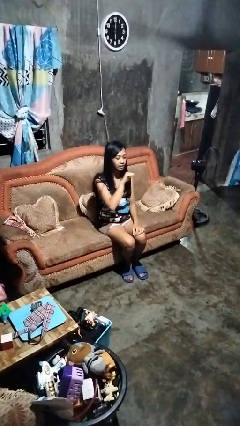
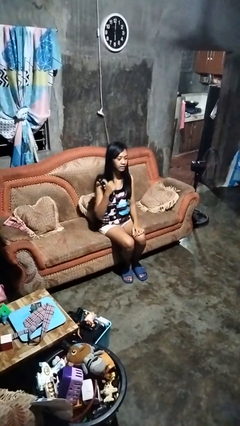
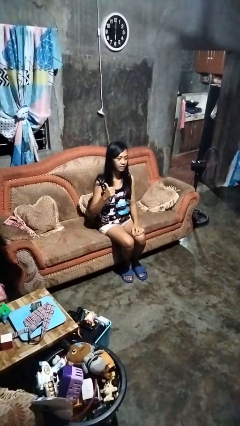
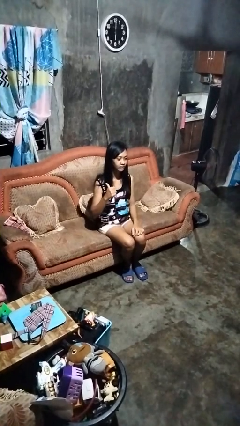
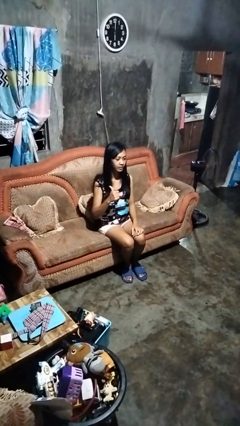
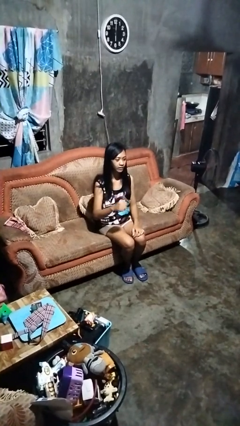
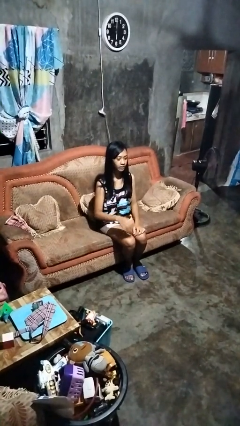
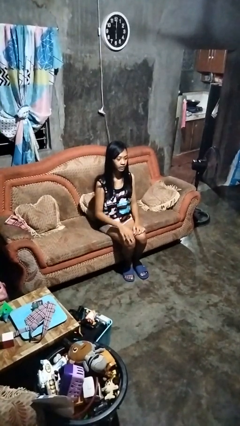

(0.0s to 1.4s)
person gestures cut

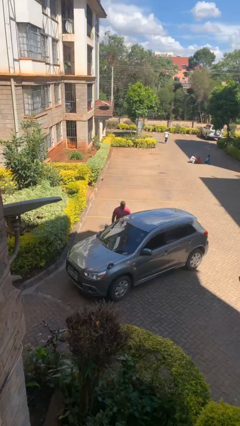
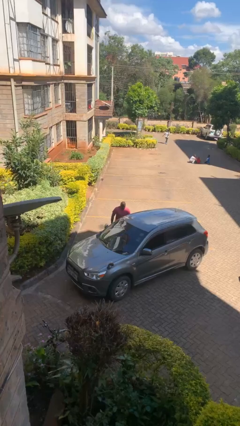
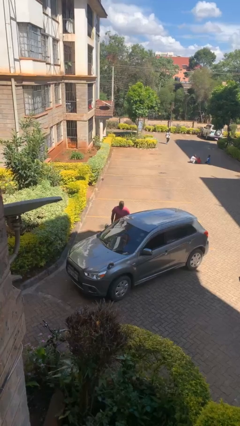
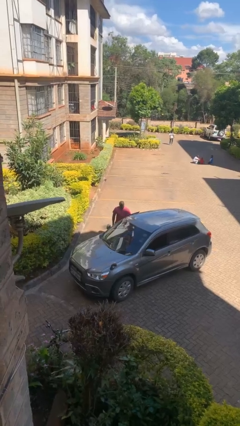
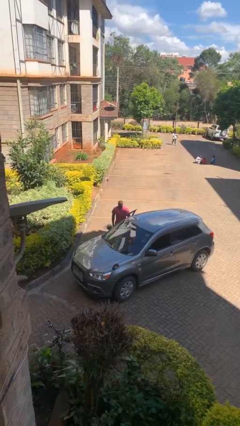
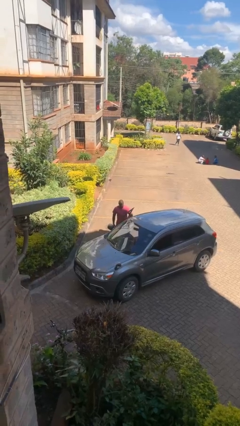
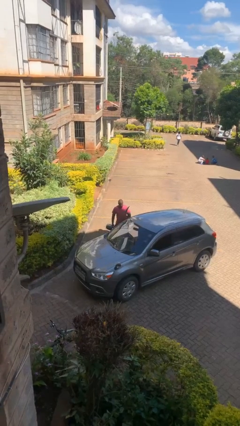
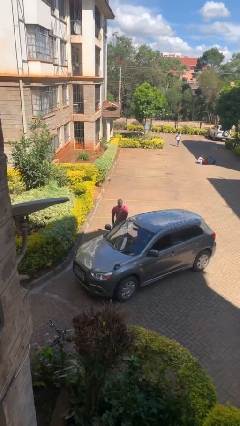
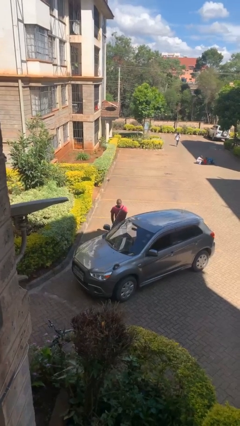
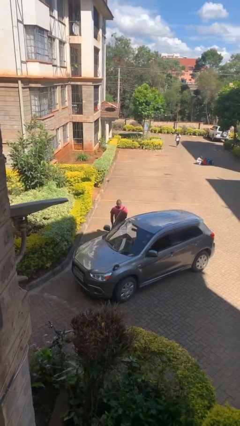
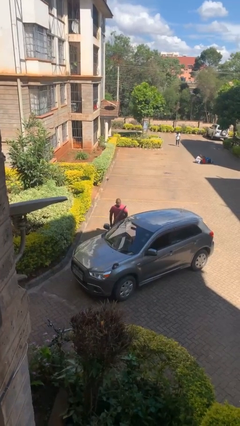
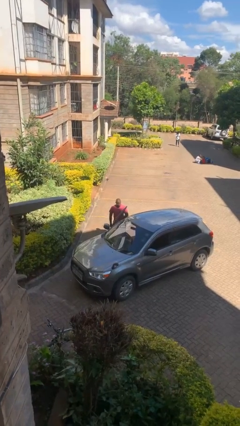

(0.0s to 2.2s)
person opens car door

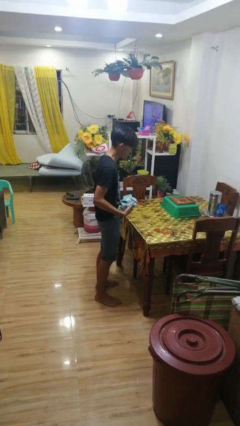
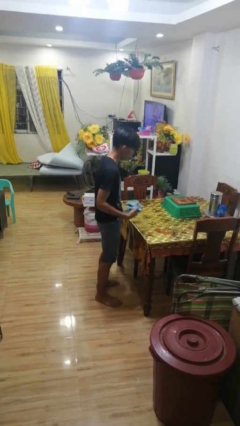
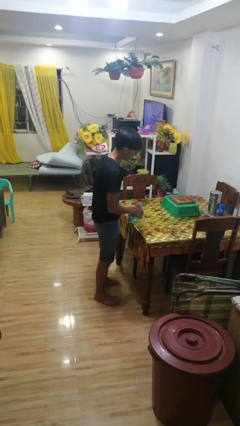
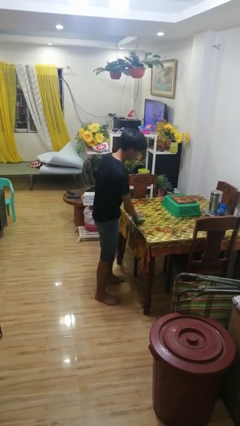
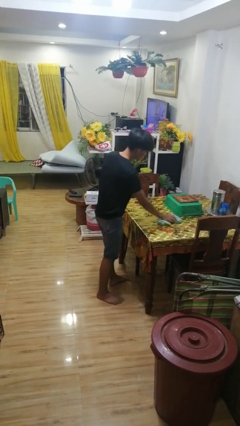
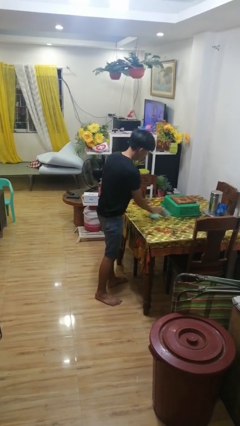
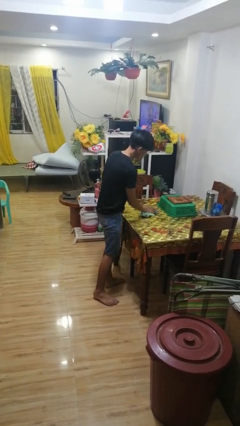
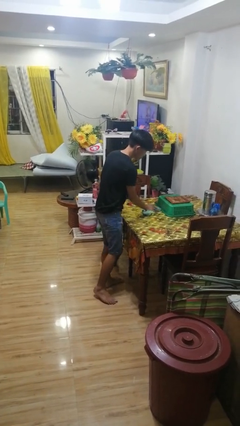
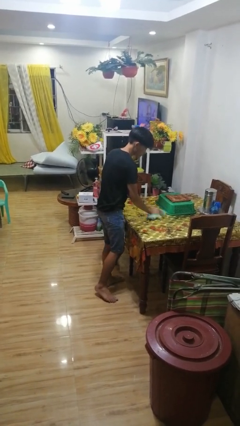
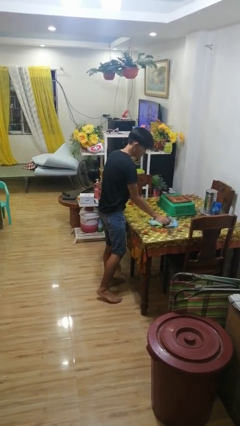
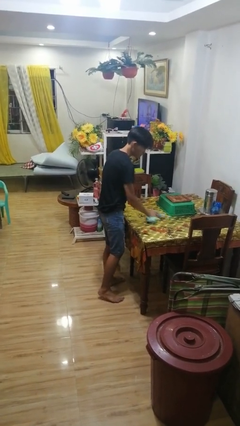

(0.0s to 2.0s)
person cleans table with rag

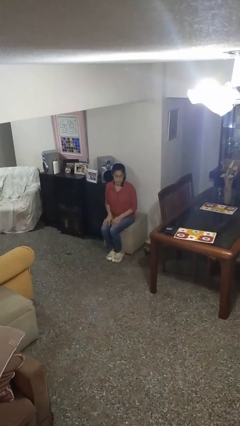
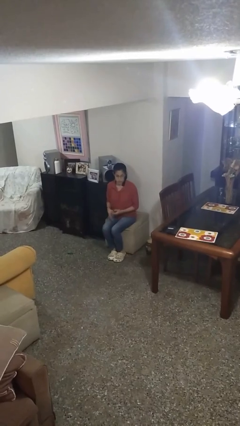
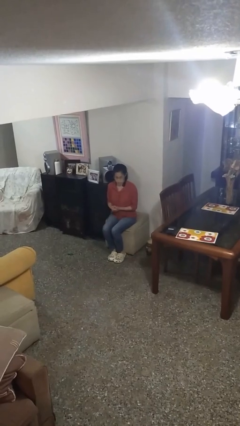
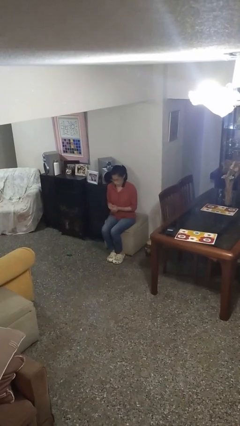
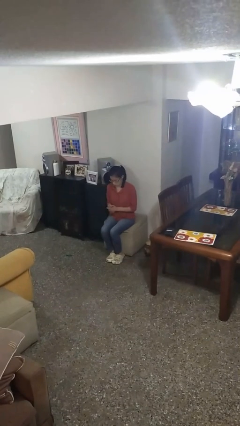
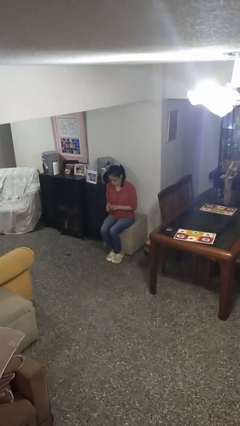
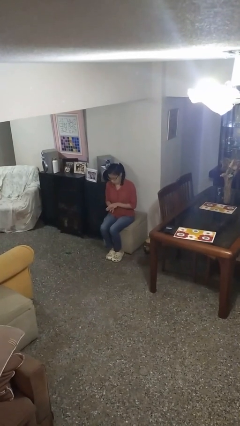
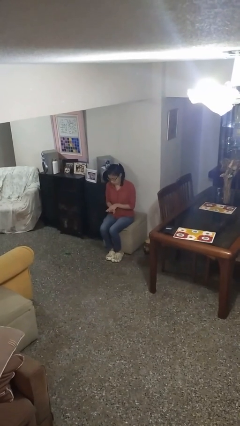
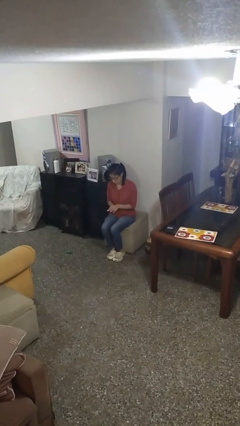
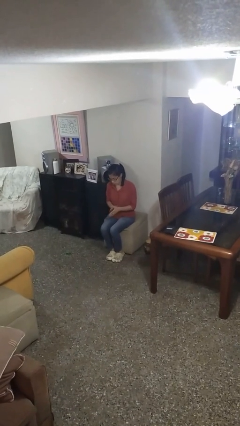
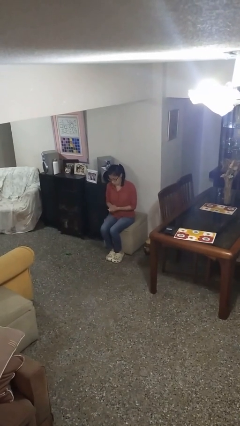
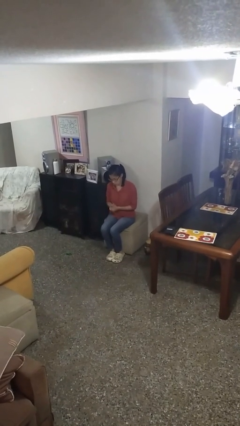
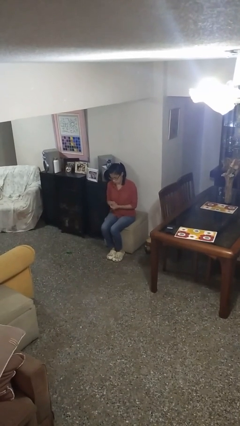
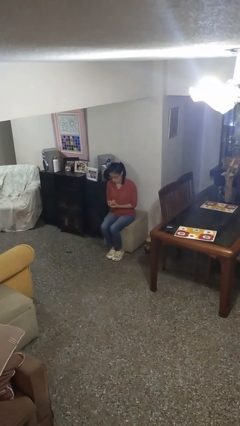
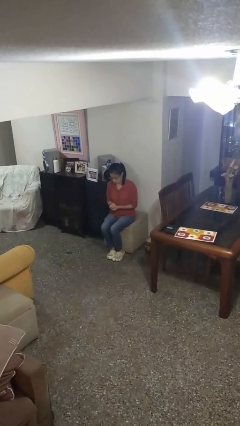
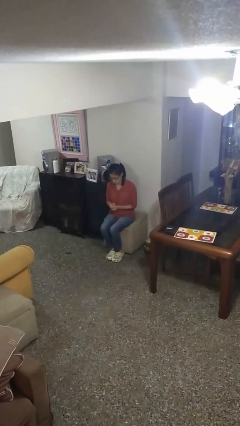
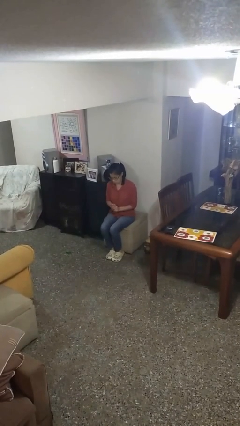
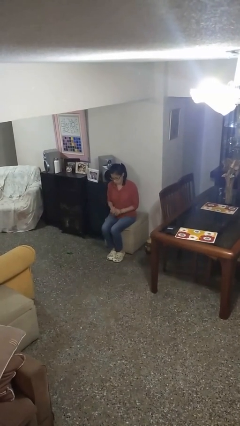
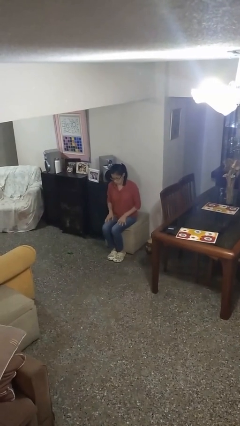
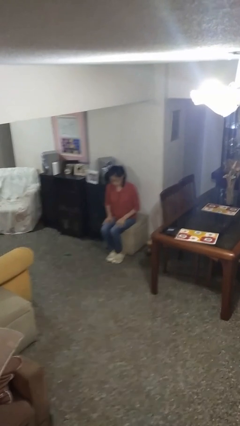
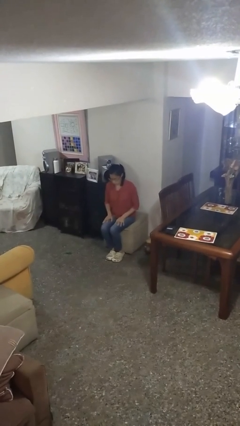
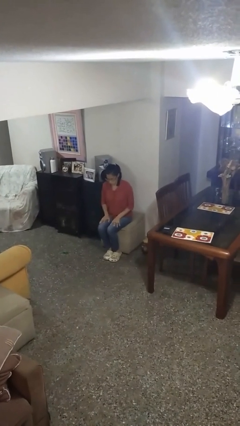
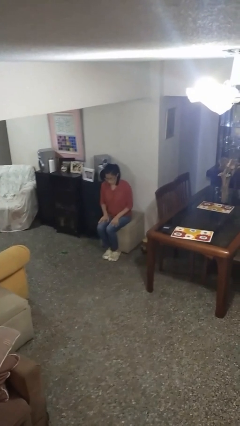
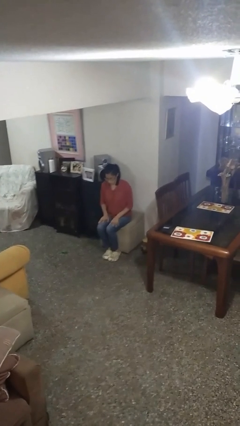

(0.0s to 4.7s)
person looks at hands in lap

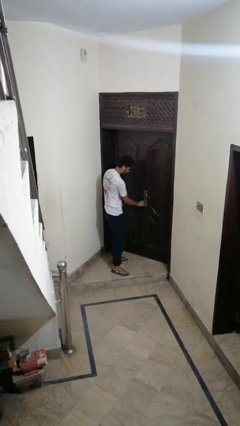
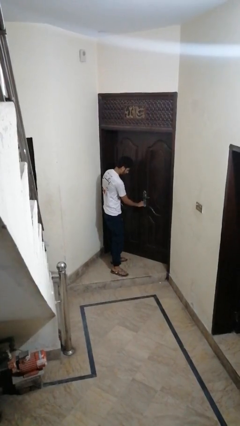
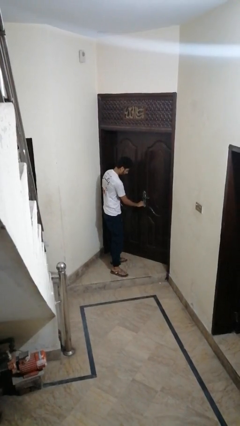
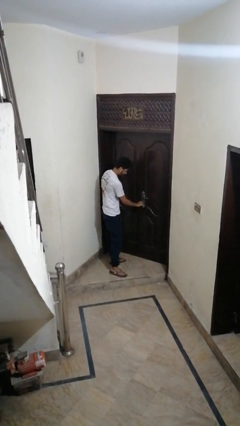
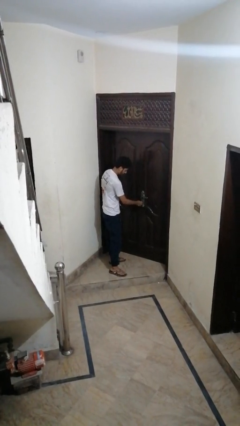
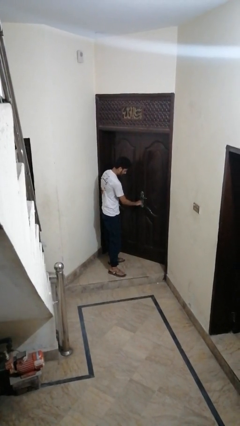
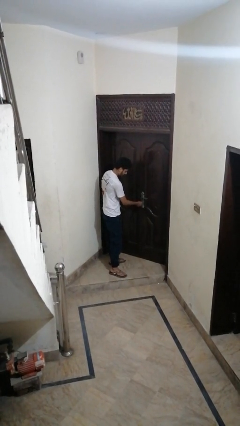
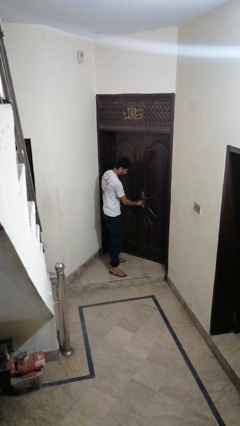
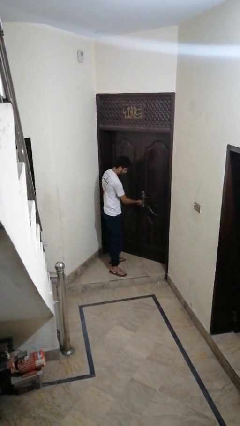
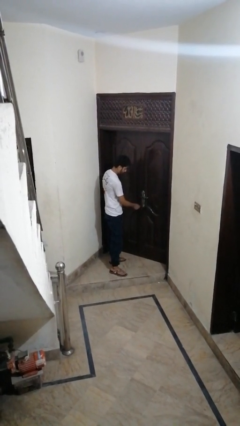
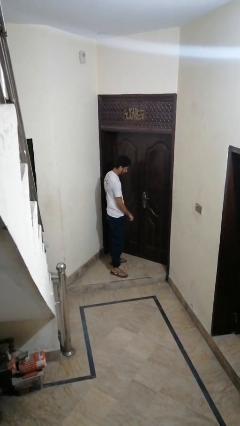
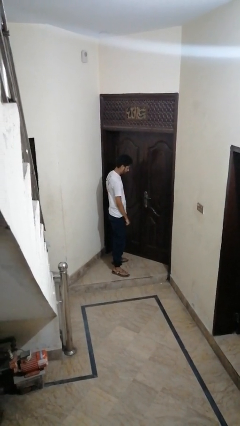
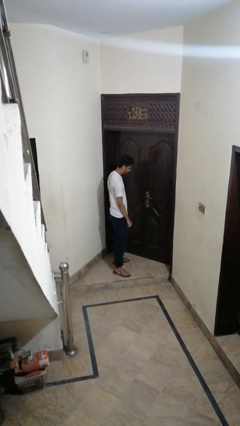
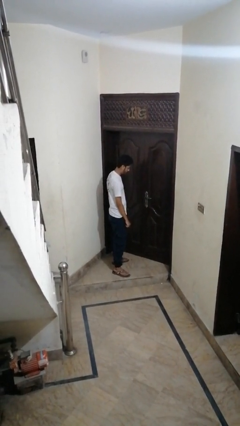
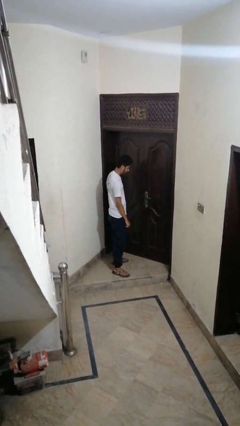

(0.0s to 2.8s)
person unlocks door with keys

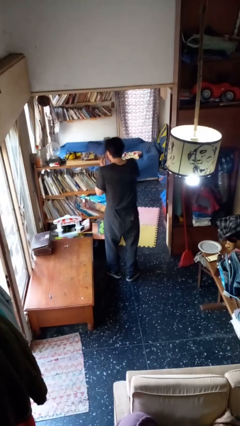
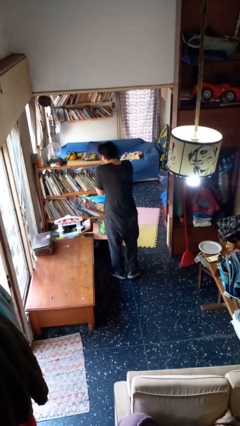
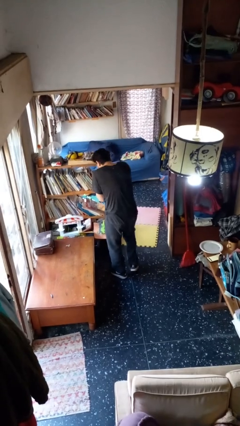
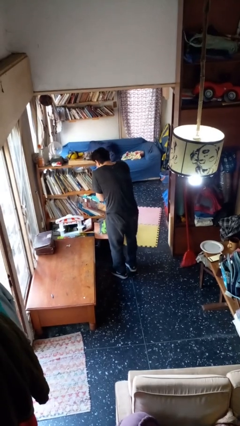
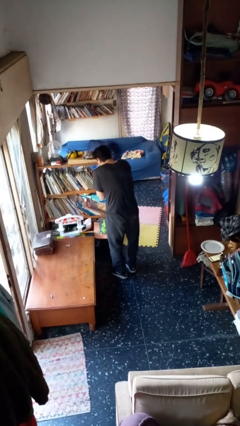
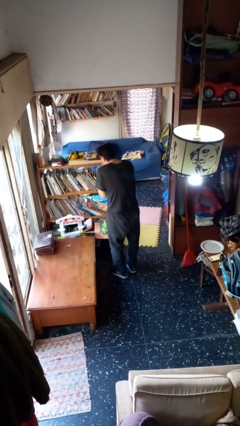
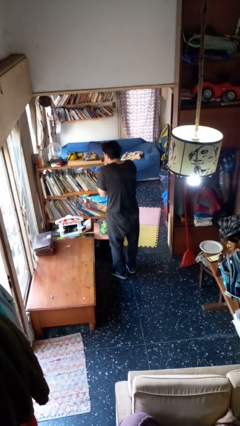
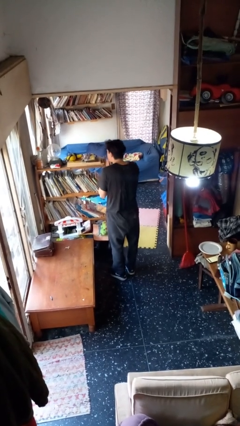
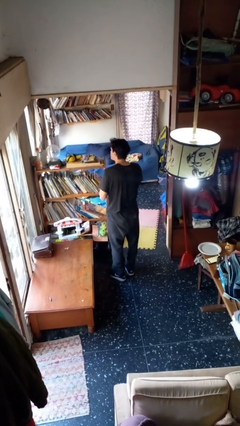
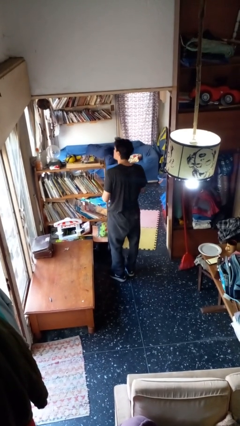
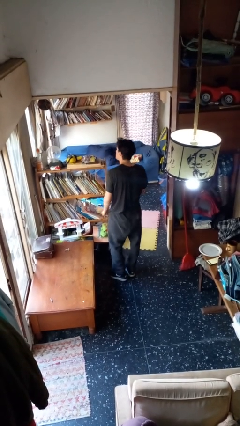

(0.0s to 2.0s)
person sneezes into hand

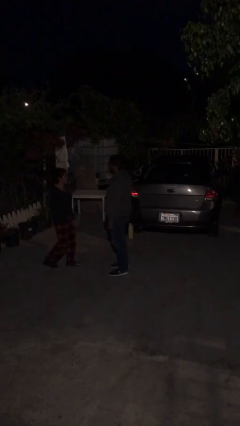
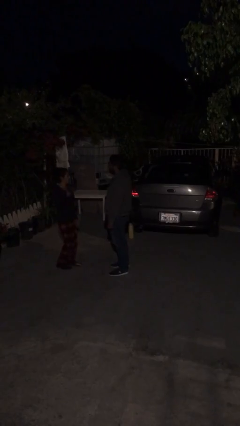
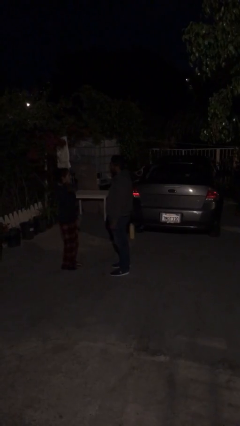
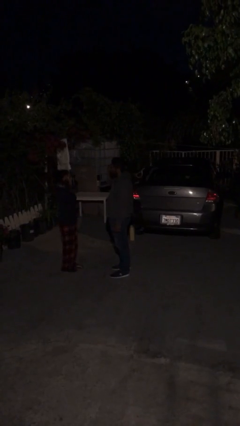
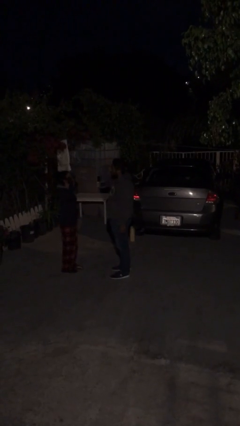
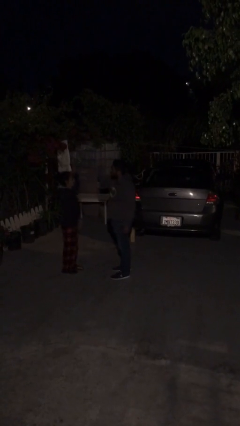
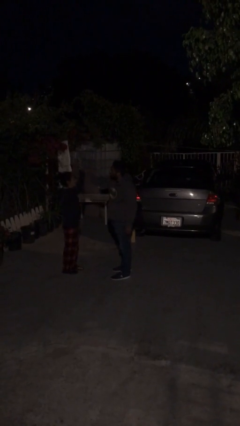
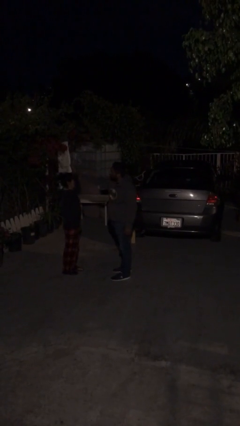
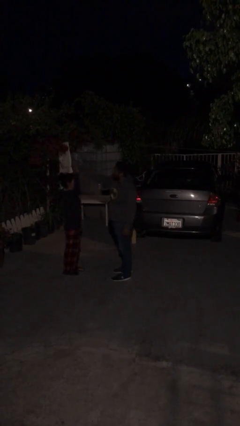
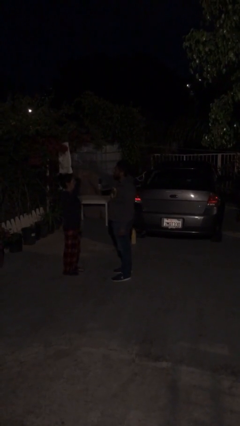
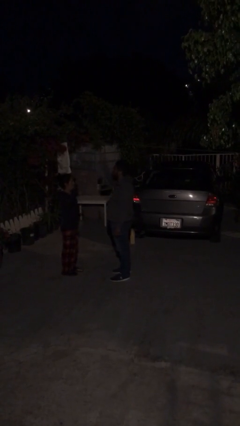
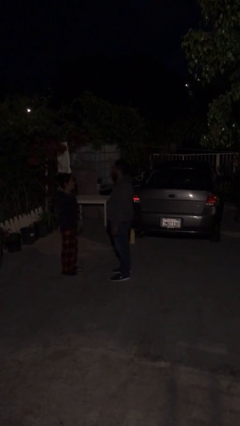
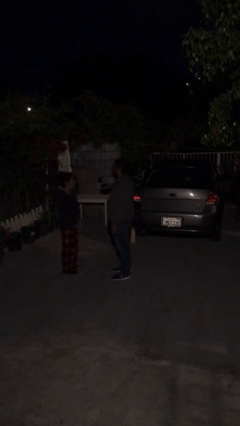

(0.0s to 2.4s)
person highfives hand
